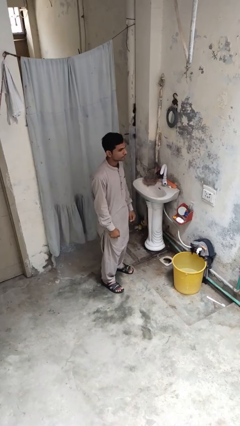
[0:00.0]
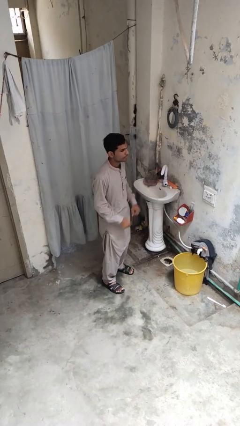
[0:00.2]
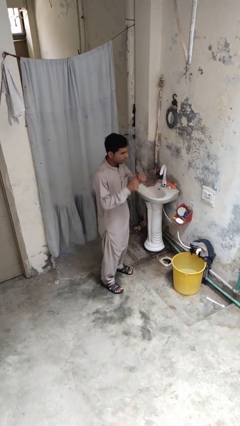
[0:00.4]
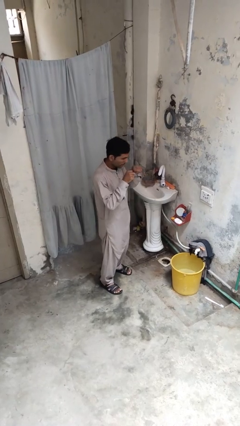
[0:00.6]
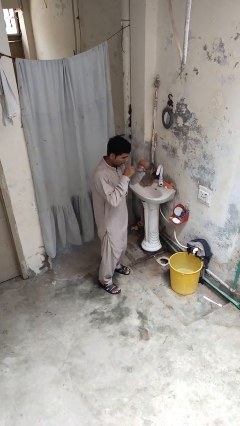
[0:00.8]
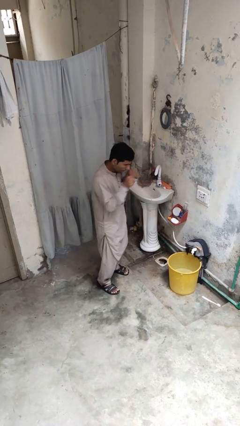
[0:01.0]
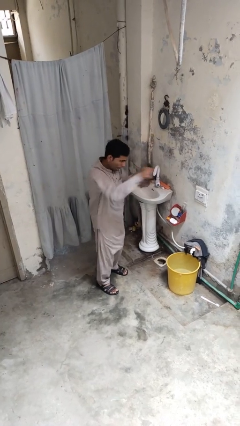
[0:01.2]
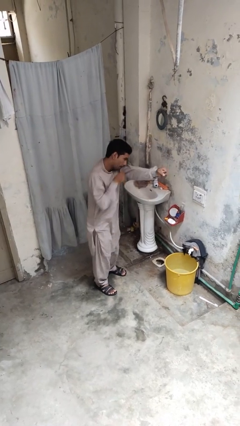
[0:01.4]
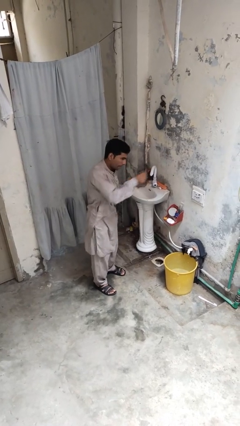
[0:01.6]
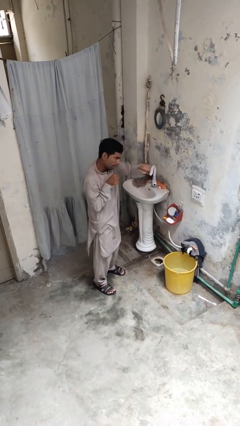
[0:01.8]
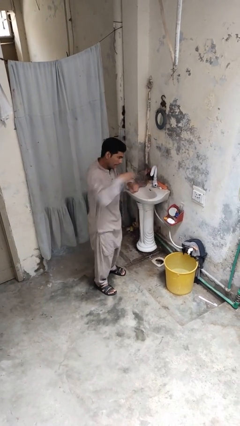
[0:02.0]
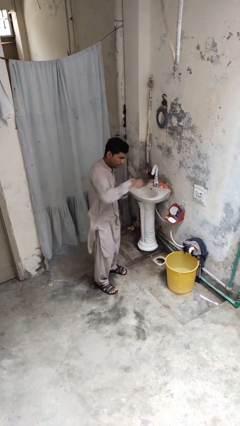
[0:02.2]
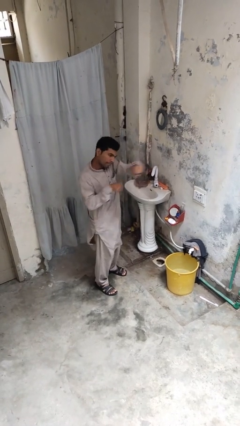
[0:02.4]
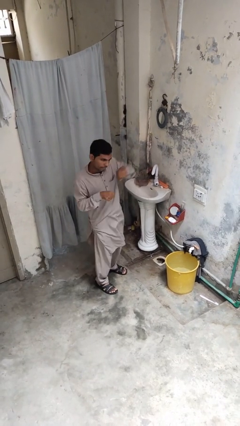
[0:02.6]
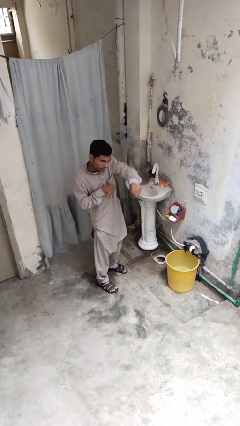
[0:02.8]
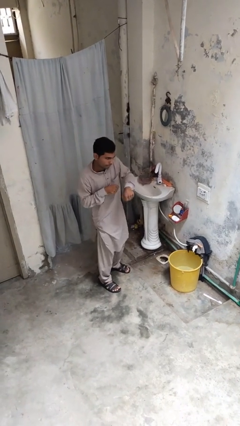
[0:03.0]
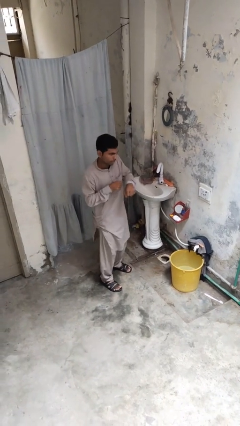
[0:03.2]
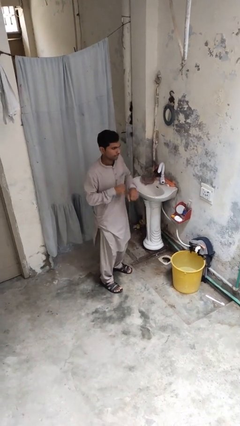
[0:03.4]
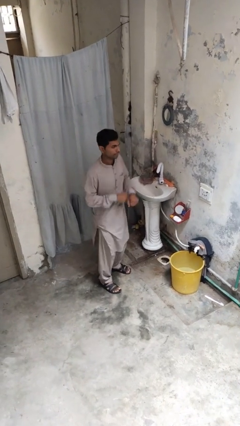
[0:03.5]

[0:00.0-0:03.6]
person punches

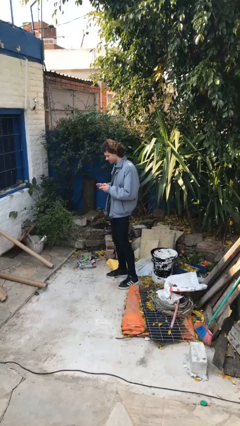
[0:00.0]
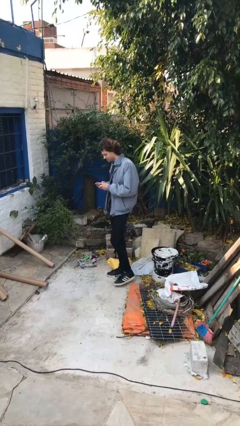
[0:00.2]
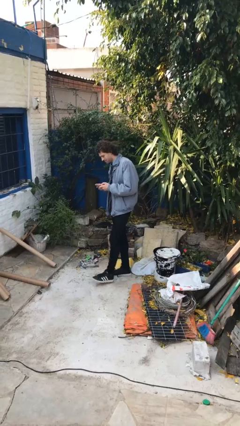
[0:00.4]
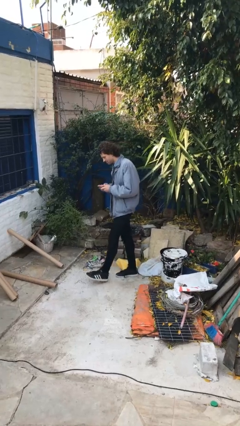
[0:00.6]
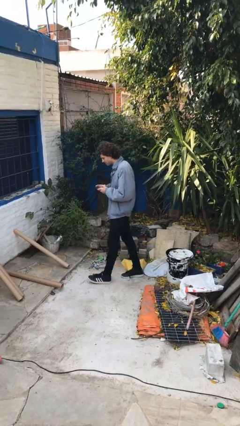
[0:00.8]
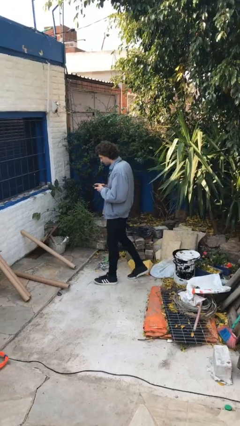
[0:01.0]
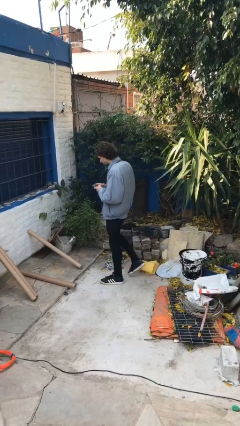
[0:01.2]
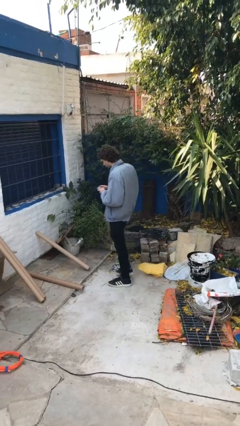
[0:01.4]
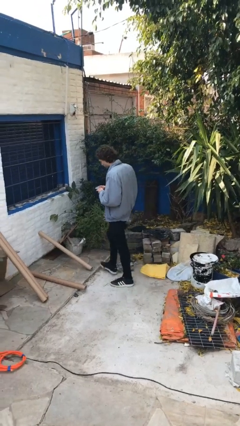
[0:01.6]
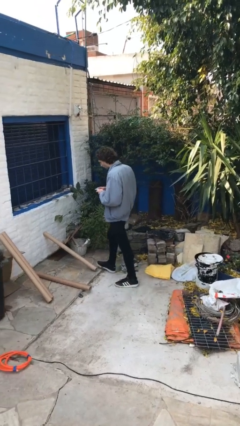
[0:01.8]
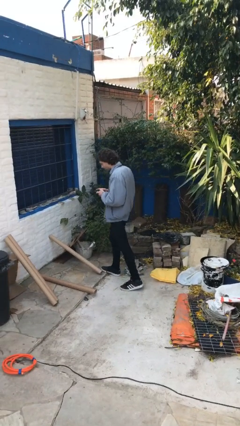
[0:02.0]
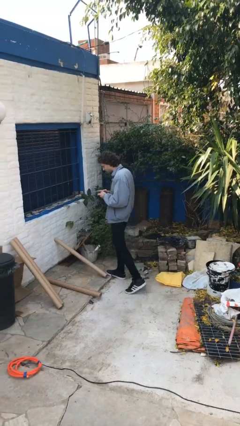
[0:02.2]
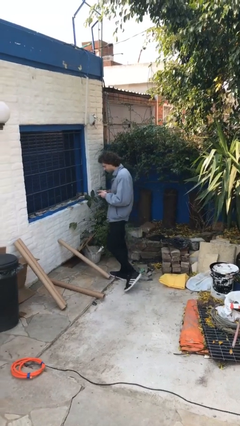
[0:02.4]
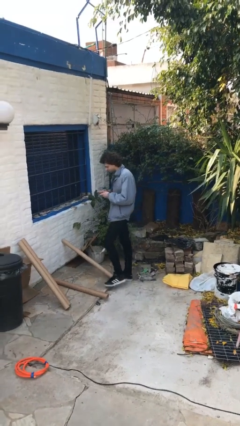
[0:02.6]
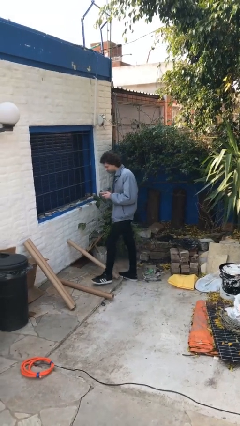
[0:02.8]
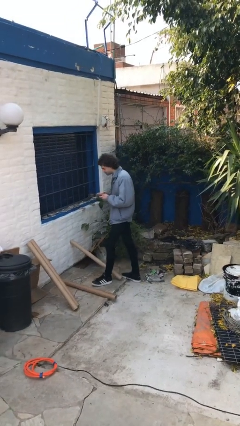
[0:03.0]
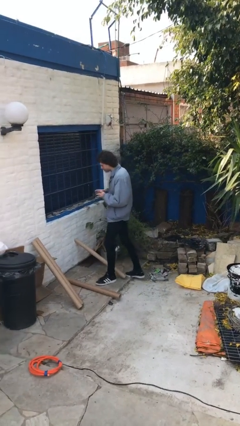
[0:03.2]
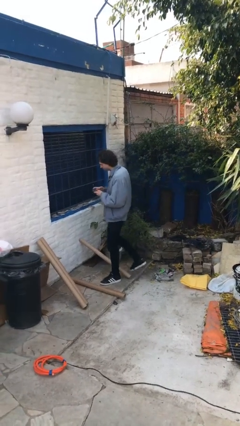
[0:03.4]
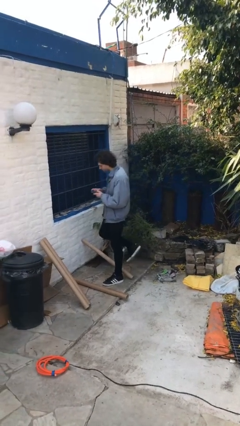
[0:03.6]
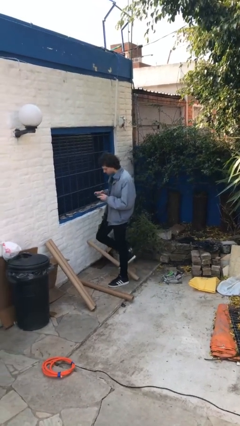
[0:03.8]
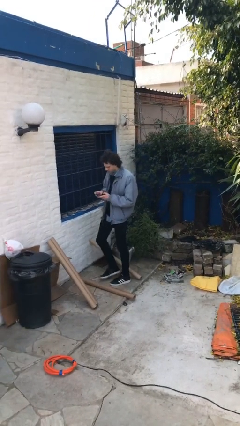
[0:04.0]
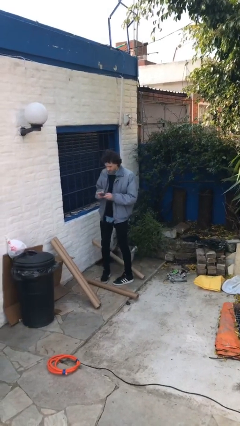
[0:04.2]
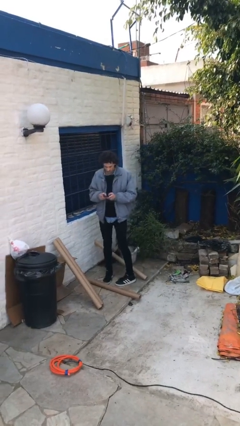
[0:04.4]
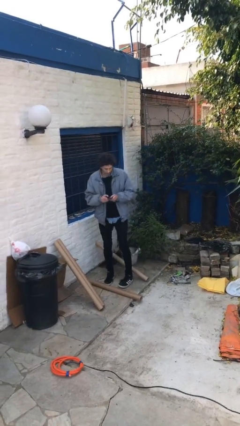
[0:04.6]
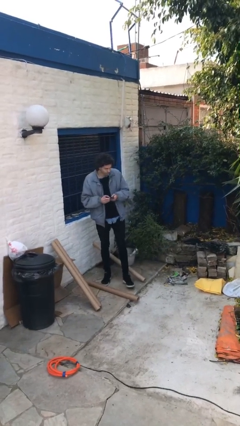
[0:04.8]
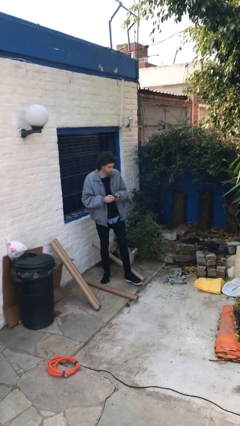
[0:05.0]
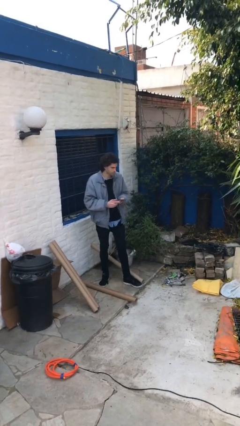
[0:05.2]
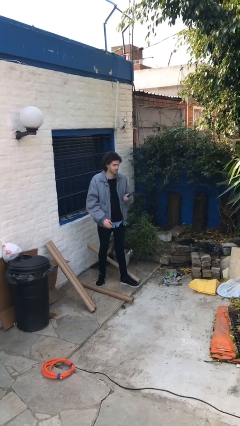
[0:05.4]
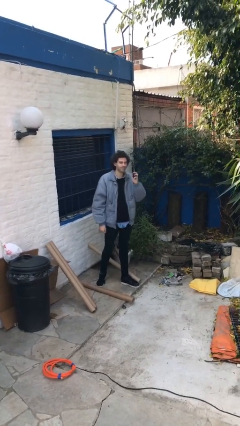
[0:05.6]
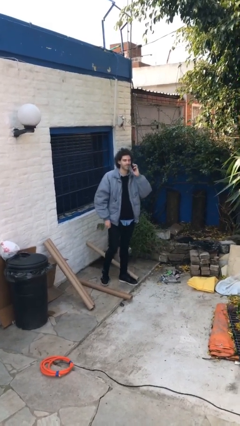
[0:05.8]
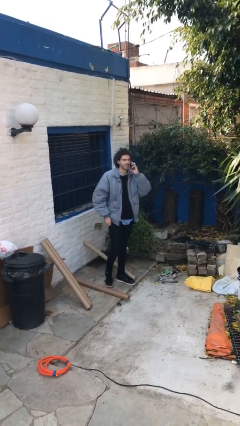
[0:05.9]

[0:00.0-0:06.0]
person texts on phone

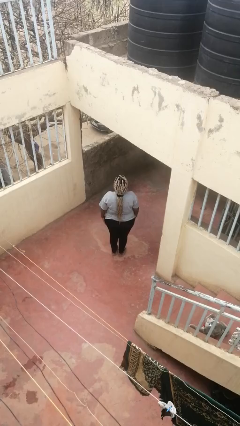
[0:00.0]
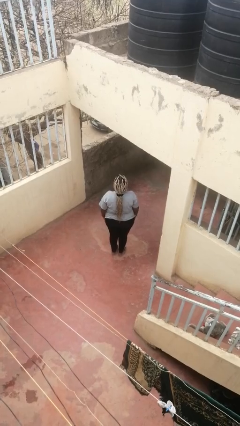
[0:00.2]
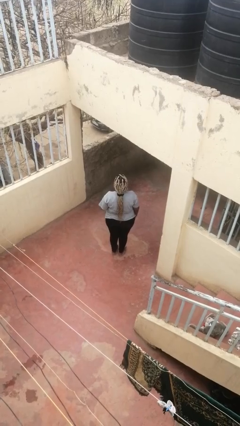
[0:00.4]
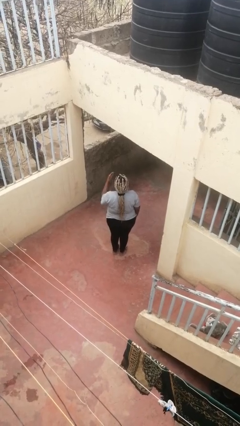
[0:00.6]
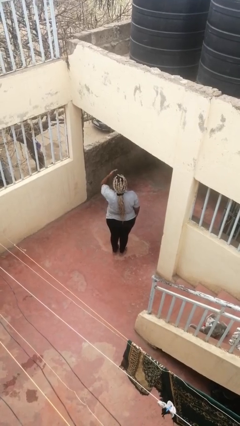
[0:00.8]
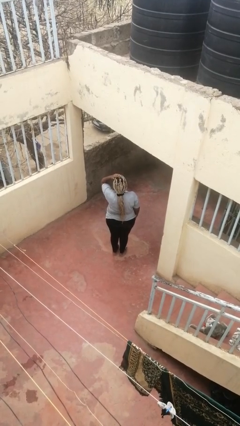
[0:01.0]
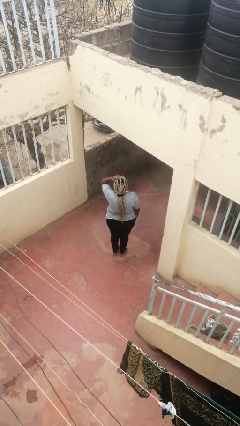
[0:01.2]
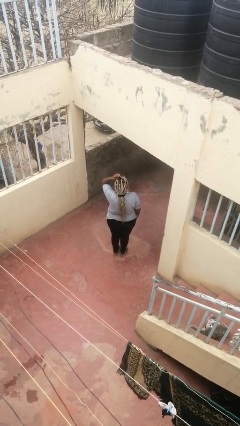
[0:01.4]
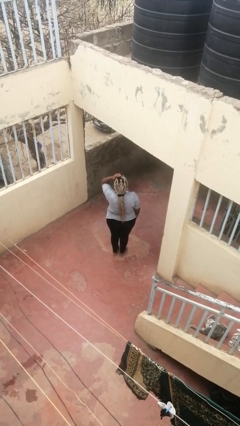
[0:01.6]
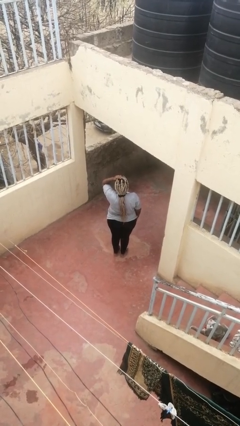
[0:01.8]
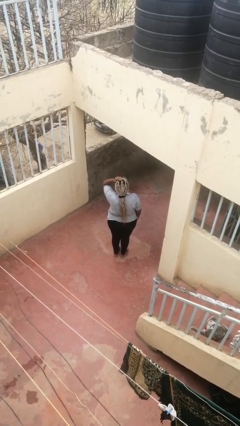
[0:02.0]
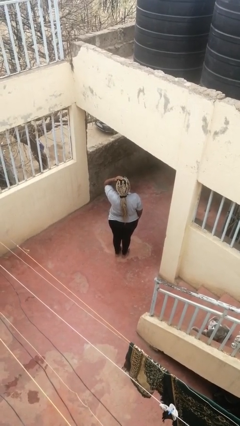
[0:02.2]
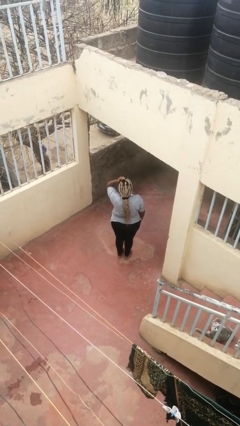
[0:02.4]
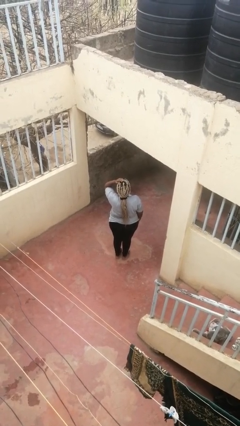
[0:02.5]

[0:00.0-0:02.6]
person pats head

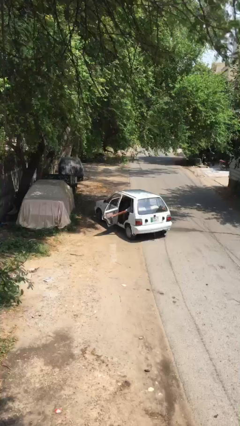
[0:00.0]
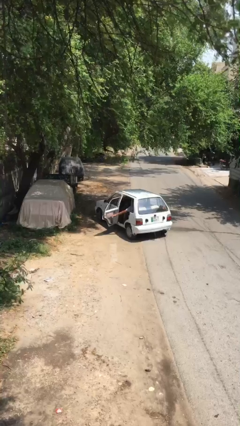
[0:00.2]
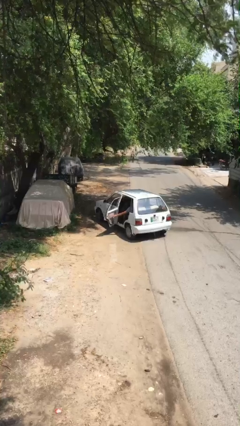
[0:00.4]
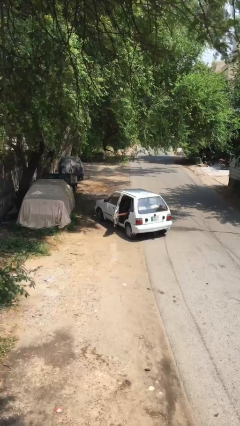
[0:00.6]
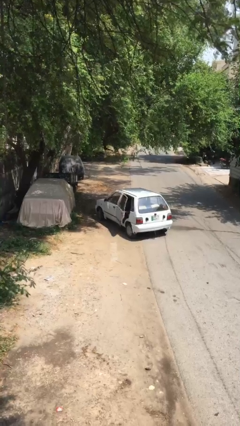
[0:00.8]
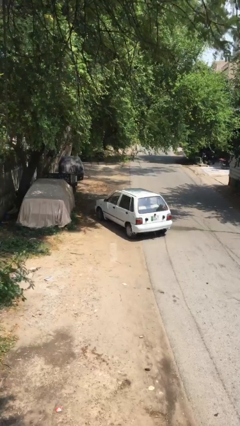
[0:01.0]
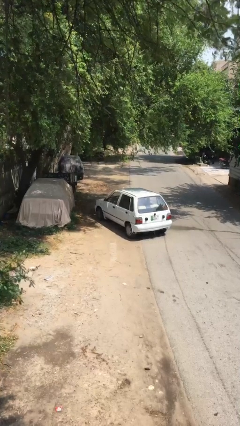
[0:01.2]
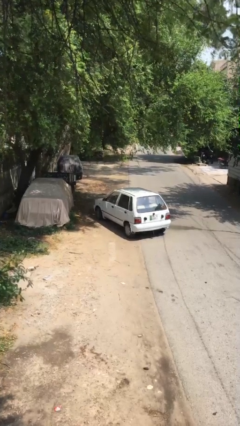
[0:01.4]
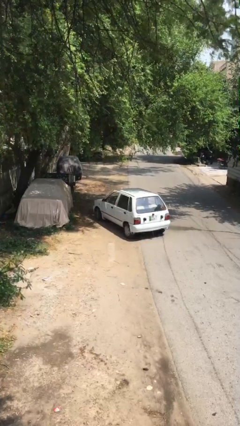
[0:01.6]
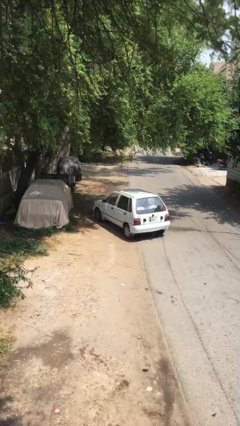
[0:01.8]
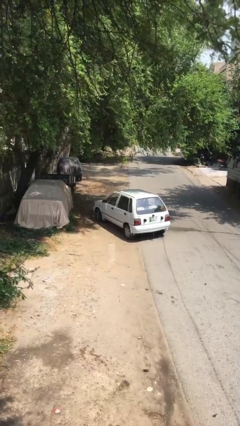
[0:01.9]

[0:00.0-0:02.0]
person closes car door

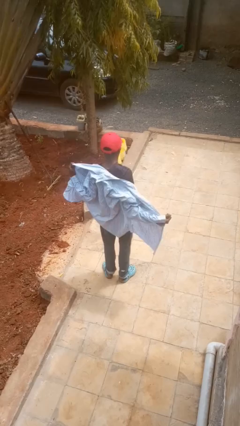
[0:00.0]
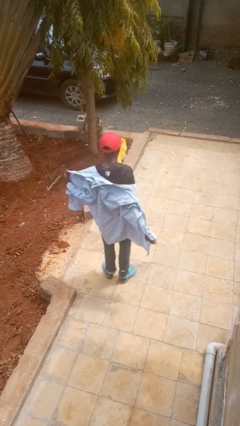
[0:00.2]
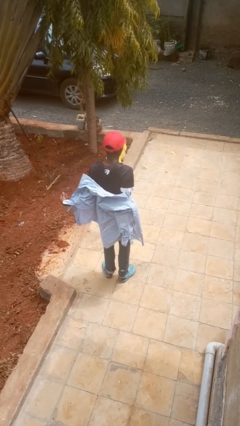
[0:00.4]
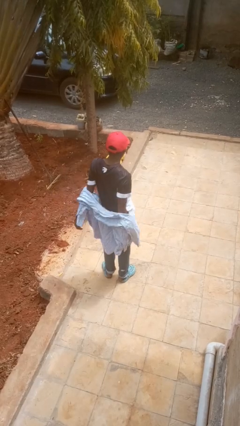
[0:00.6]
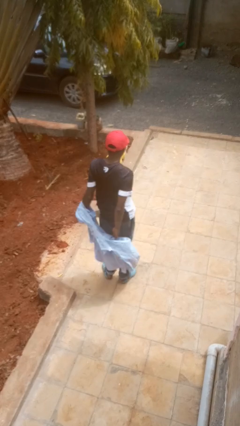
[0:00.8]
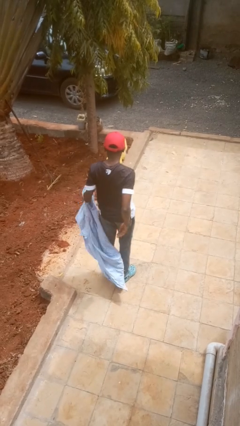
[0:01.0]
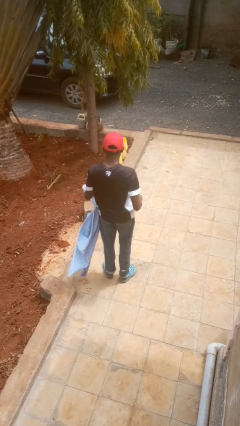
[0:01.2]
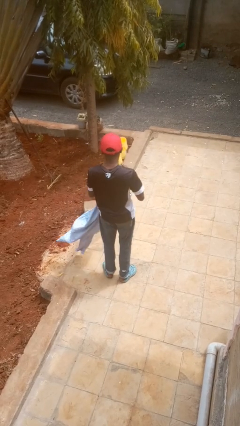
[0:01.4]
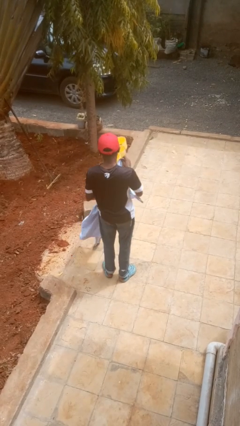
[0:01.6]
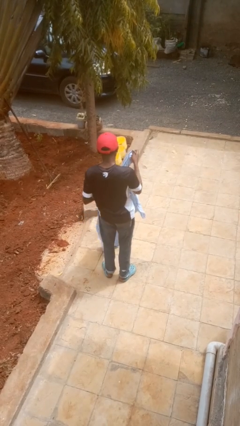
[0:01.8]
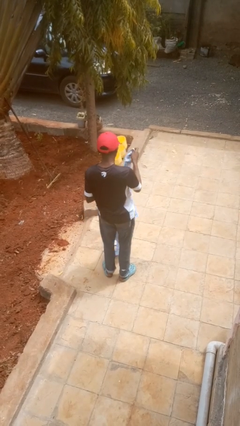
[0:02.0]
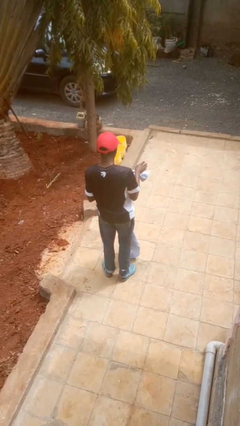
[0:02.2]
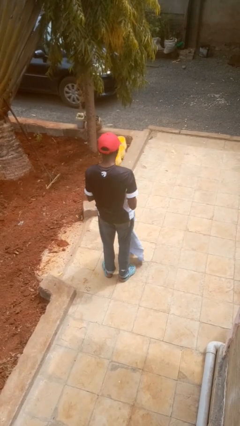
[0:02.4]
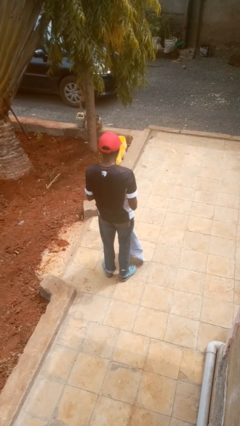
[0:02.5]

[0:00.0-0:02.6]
person takes off shirt

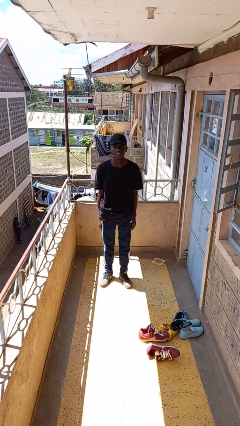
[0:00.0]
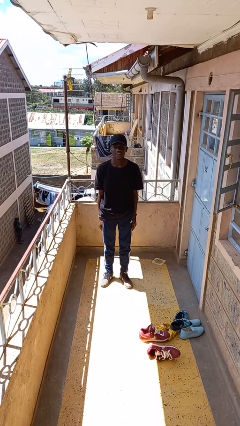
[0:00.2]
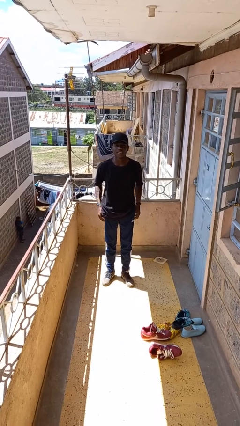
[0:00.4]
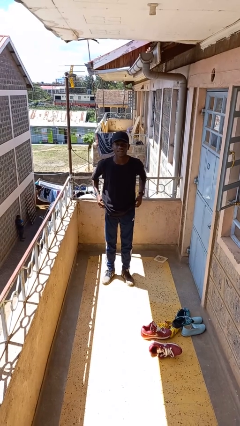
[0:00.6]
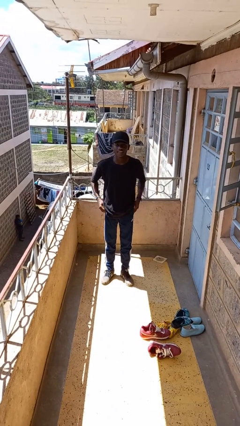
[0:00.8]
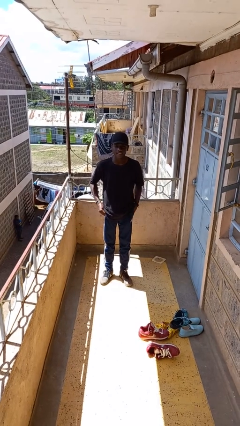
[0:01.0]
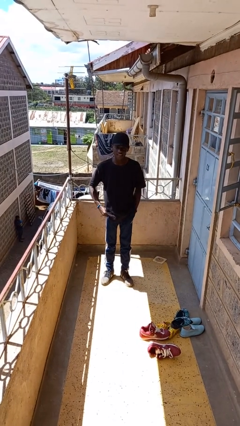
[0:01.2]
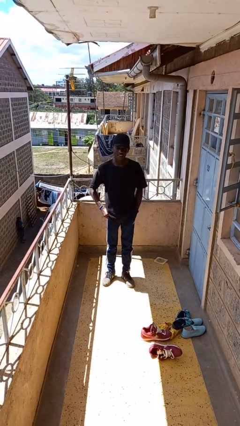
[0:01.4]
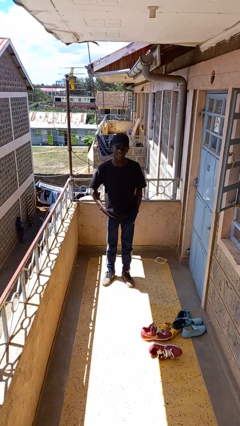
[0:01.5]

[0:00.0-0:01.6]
person puts hands in back pockets
